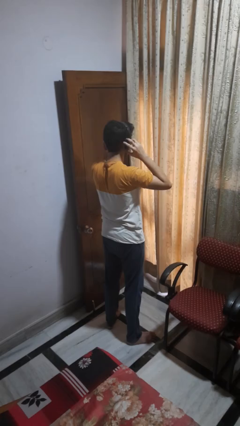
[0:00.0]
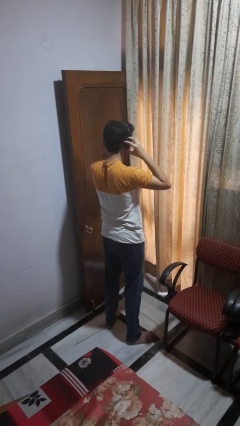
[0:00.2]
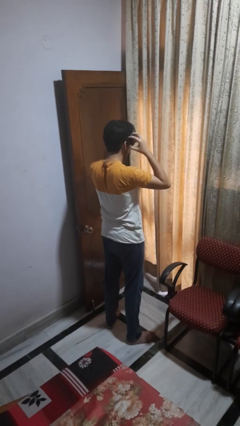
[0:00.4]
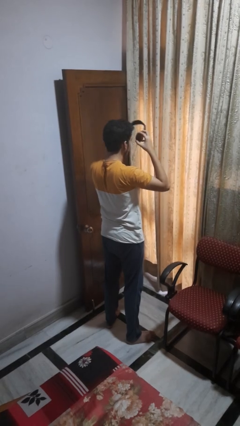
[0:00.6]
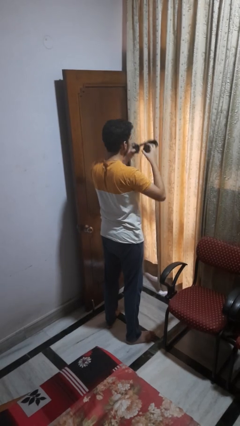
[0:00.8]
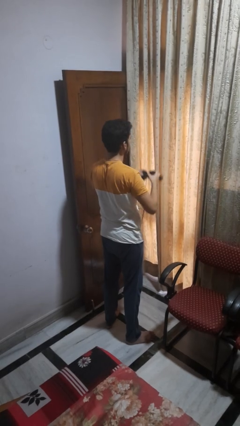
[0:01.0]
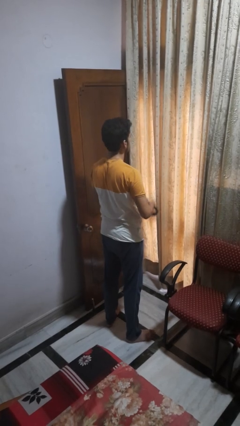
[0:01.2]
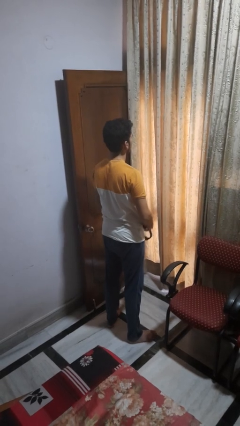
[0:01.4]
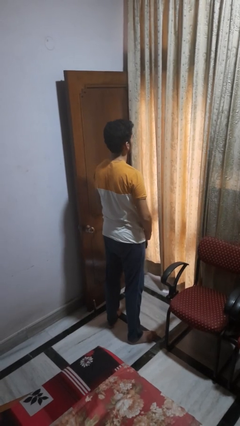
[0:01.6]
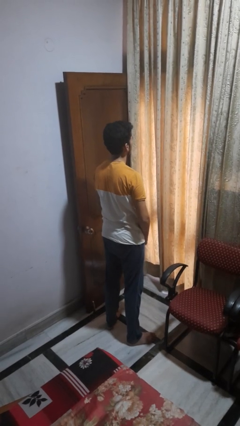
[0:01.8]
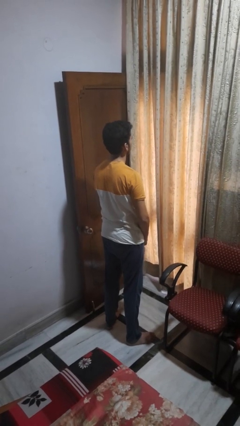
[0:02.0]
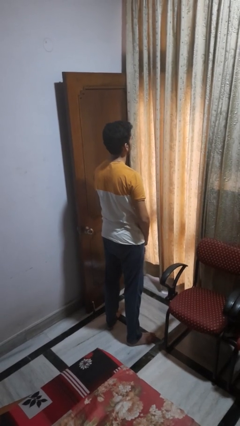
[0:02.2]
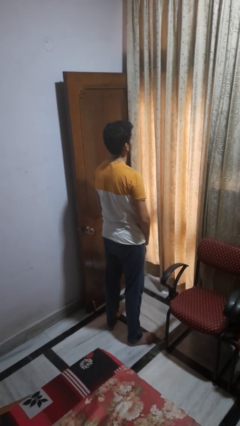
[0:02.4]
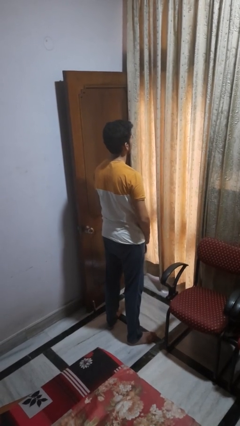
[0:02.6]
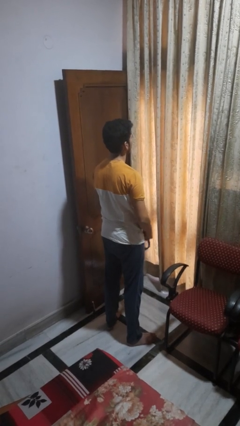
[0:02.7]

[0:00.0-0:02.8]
person takes off headphones

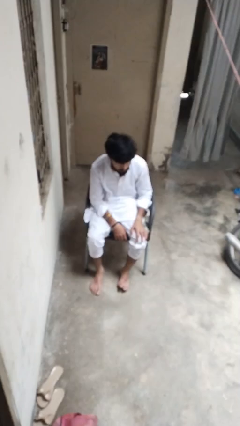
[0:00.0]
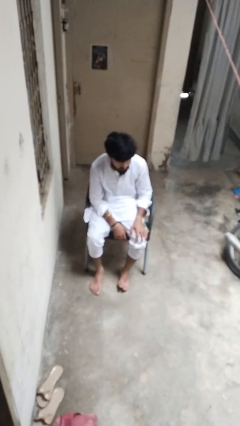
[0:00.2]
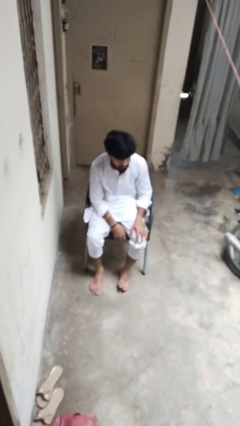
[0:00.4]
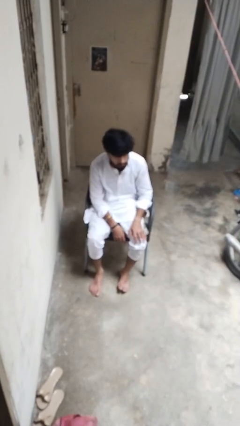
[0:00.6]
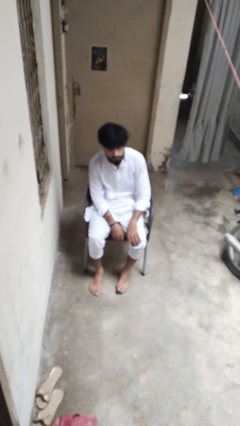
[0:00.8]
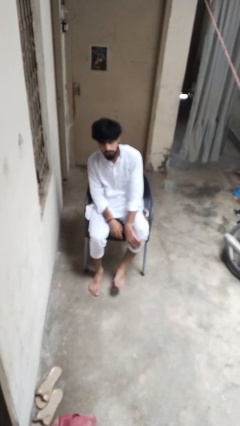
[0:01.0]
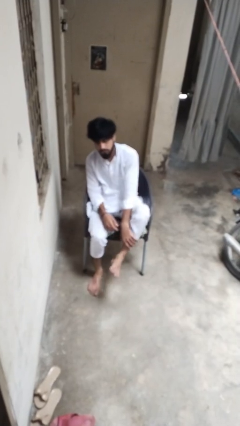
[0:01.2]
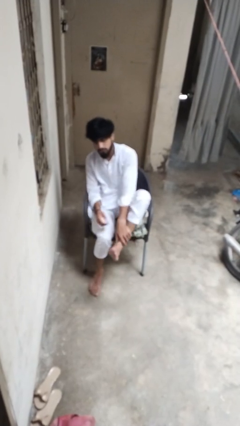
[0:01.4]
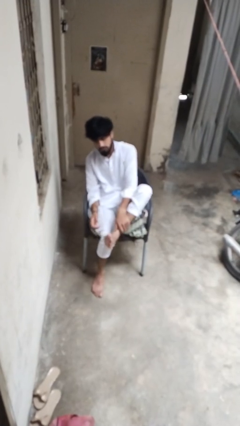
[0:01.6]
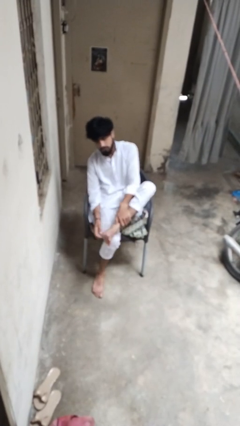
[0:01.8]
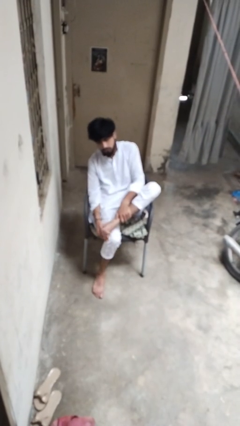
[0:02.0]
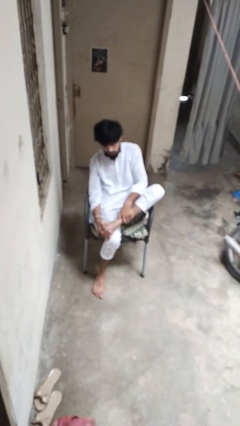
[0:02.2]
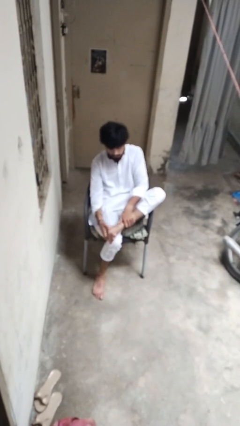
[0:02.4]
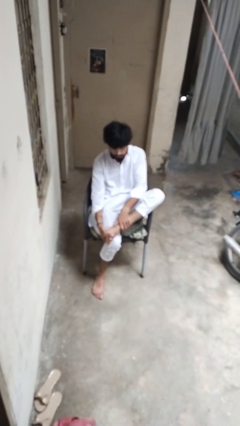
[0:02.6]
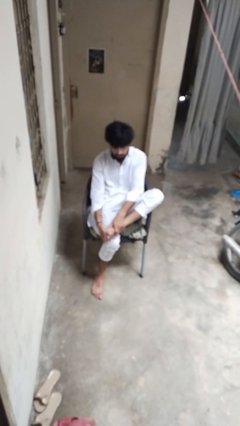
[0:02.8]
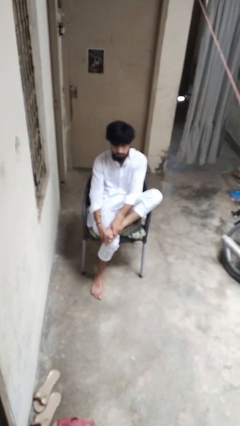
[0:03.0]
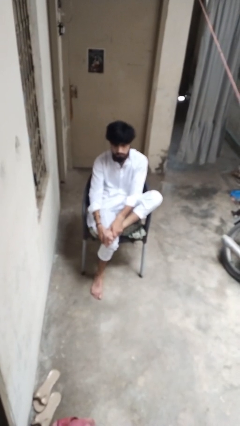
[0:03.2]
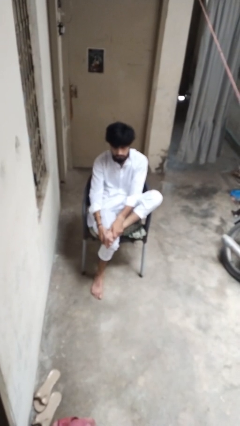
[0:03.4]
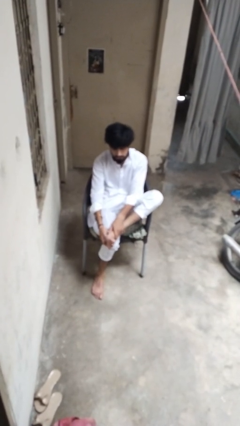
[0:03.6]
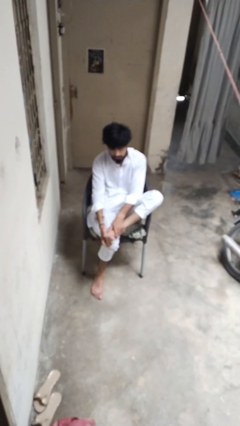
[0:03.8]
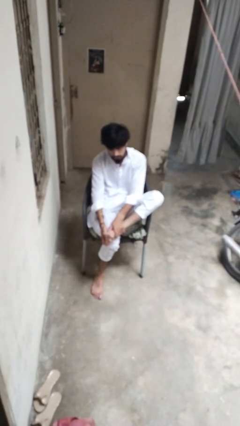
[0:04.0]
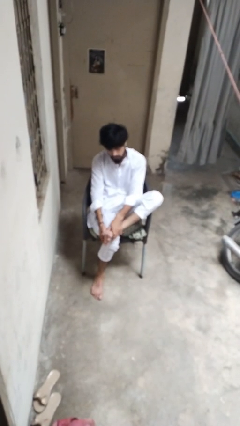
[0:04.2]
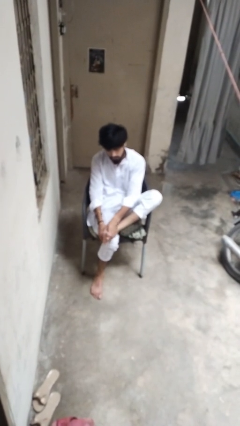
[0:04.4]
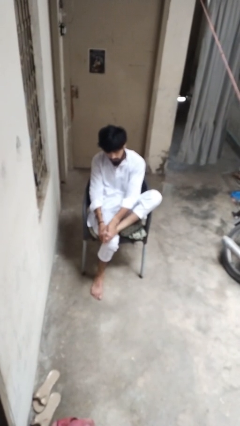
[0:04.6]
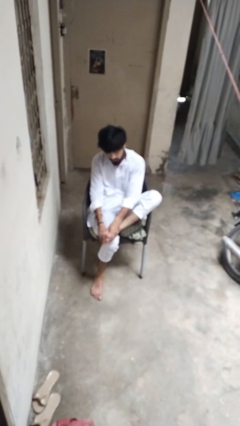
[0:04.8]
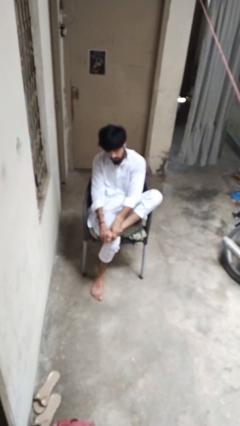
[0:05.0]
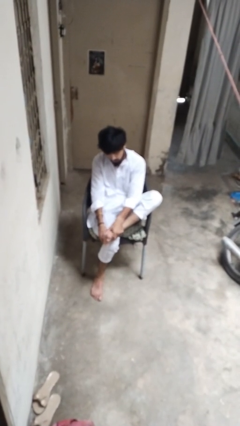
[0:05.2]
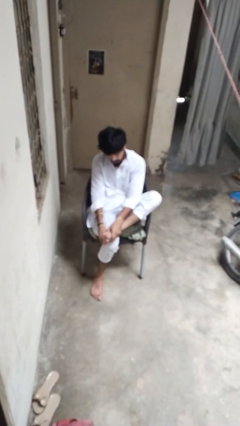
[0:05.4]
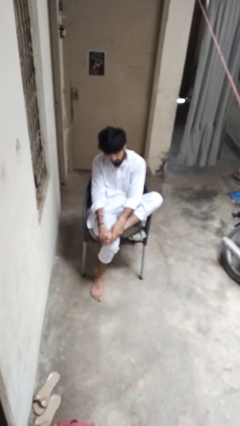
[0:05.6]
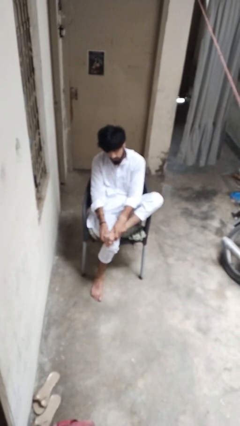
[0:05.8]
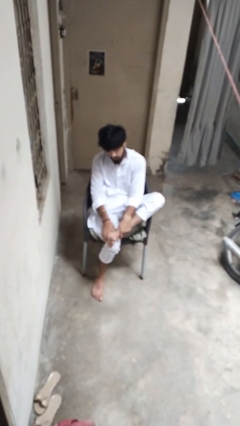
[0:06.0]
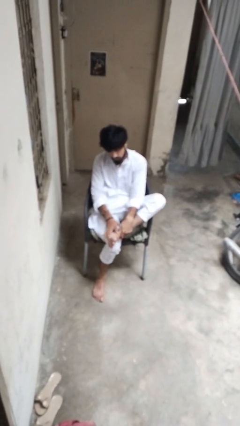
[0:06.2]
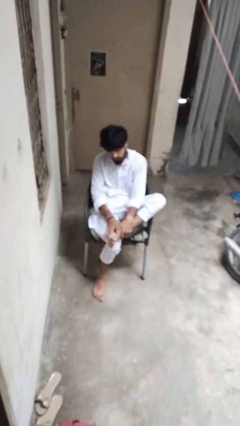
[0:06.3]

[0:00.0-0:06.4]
person rubs foot

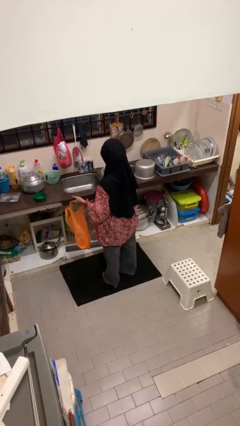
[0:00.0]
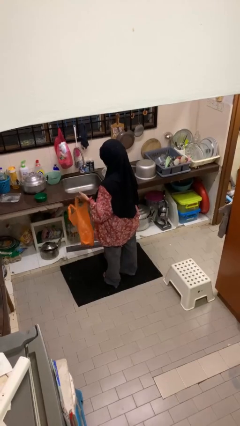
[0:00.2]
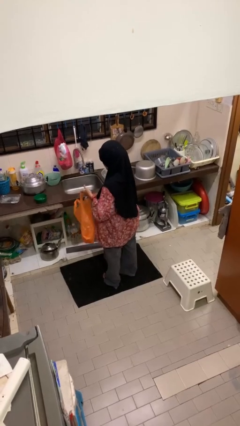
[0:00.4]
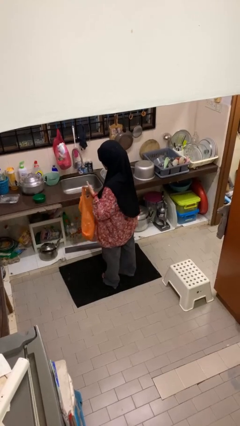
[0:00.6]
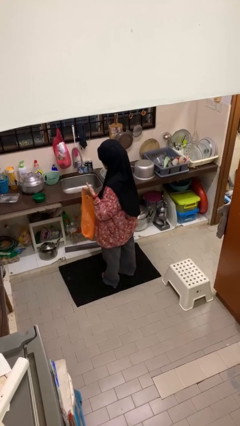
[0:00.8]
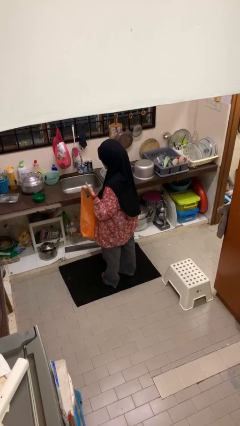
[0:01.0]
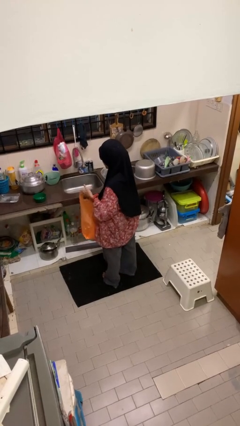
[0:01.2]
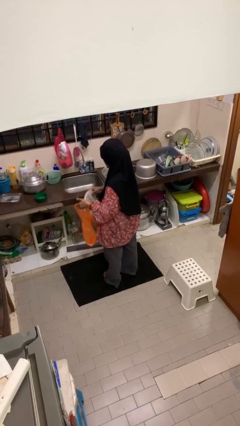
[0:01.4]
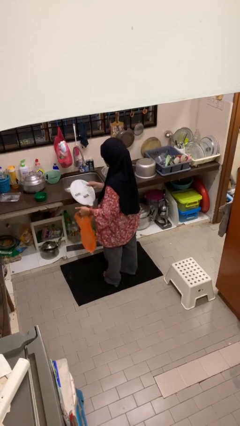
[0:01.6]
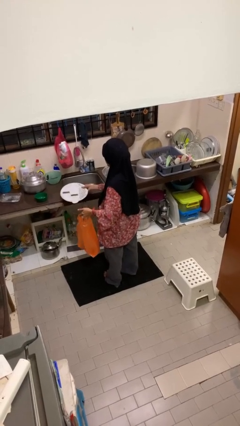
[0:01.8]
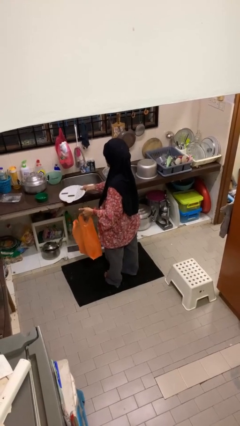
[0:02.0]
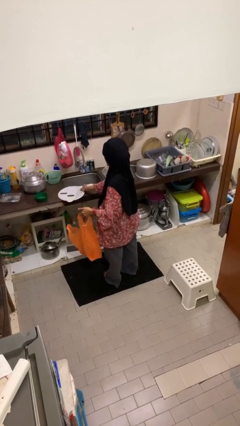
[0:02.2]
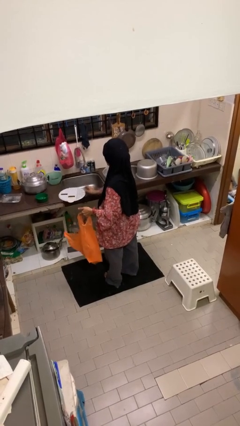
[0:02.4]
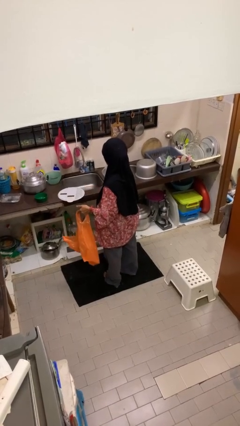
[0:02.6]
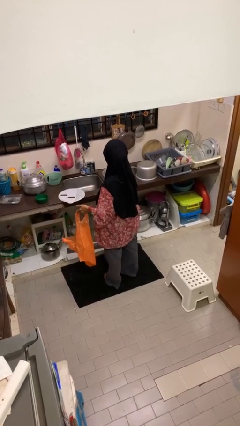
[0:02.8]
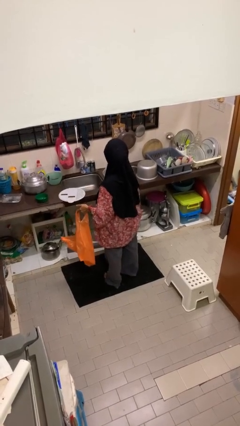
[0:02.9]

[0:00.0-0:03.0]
person takes object from bag

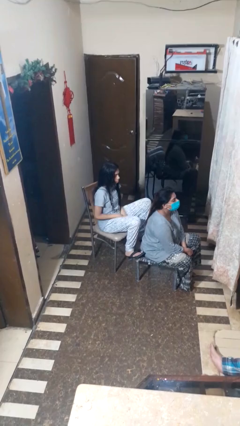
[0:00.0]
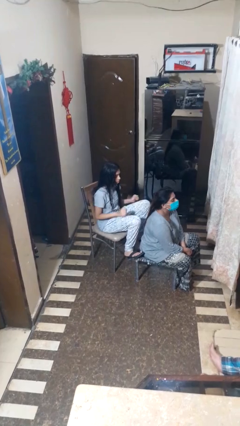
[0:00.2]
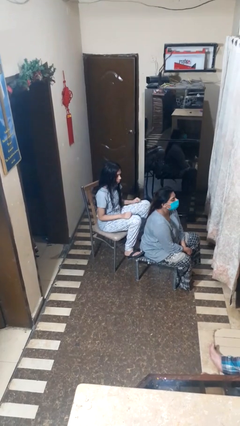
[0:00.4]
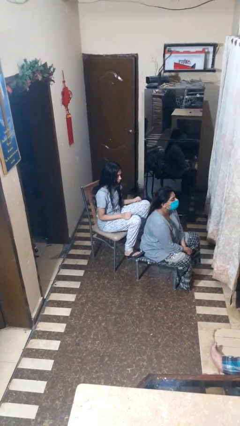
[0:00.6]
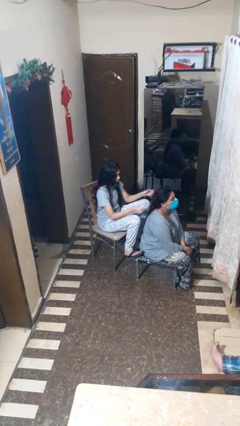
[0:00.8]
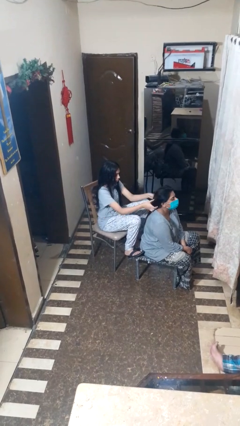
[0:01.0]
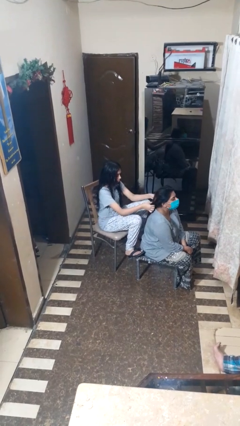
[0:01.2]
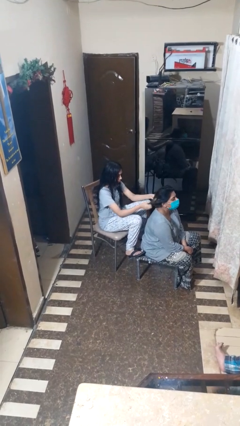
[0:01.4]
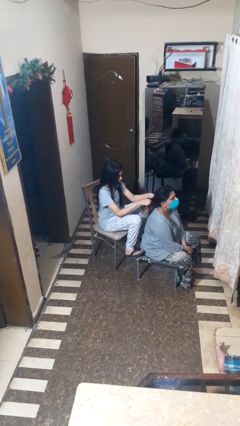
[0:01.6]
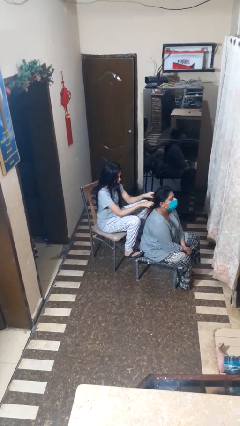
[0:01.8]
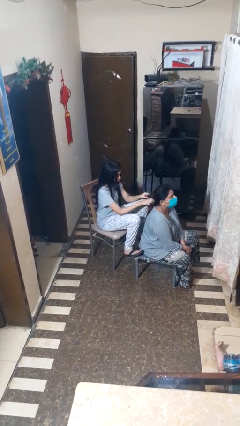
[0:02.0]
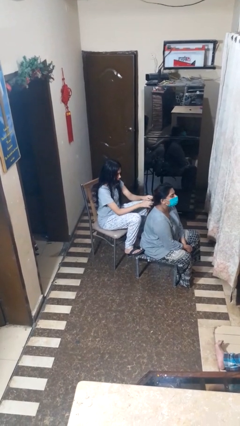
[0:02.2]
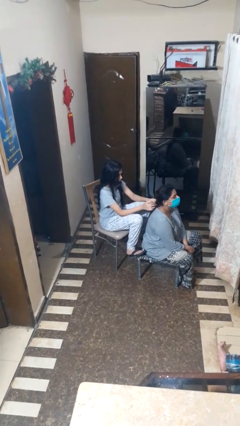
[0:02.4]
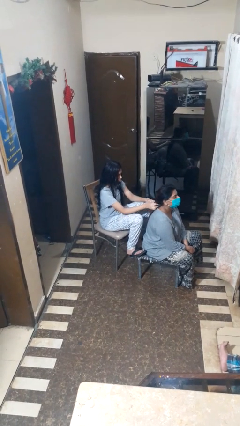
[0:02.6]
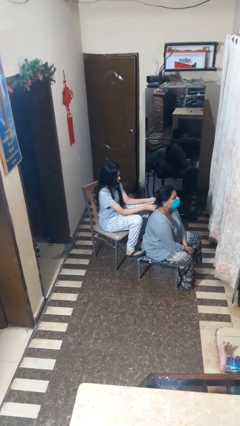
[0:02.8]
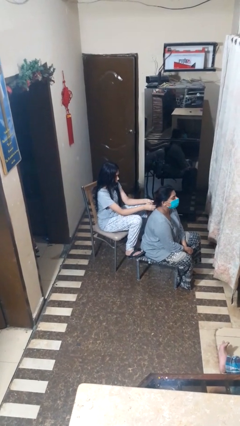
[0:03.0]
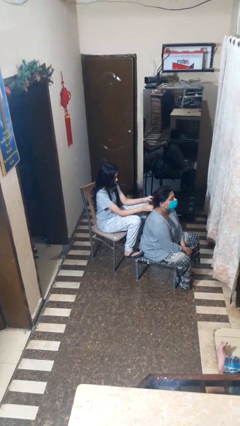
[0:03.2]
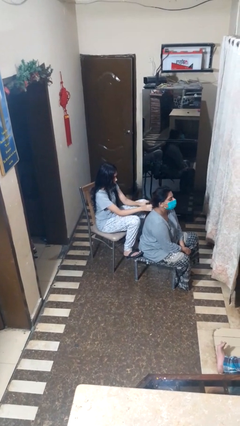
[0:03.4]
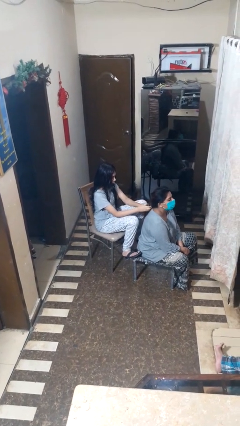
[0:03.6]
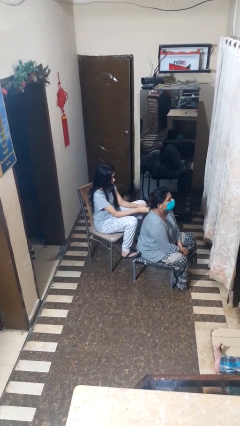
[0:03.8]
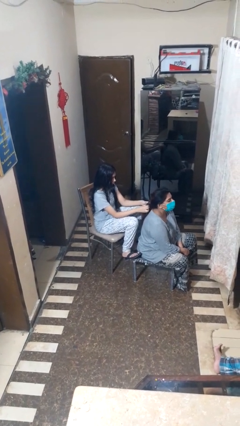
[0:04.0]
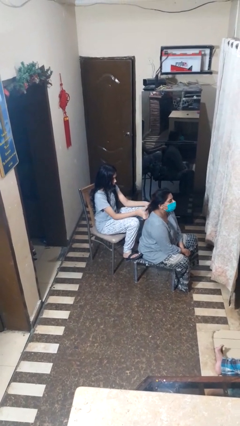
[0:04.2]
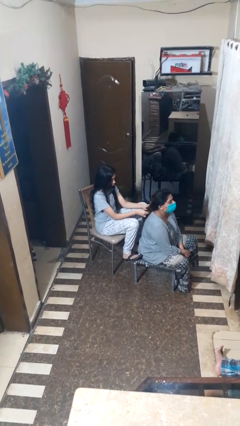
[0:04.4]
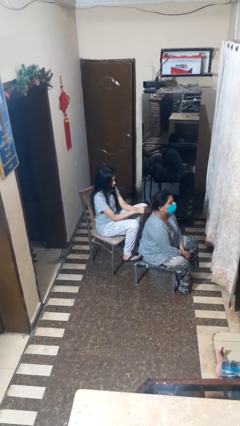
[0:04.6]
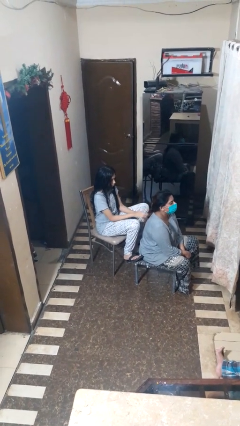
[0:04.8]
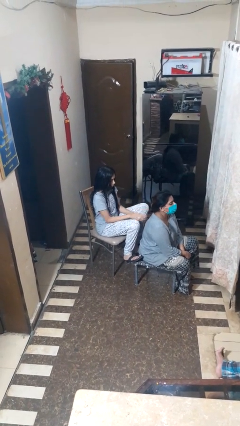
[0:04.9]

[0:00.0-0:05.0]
person braids hair of person

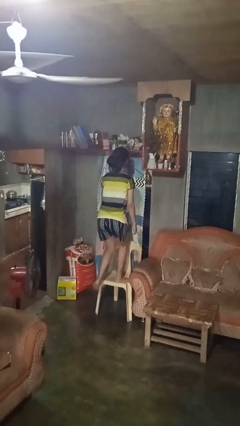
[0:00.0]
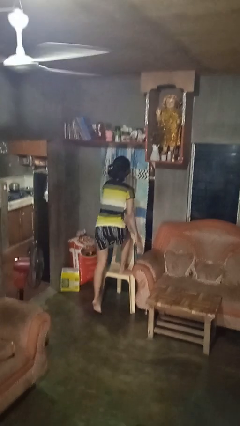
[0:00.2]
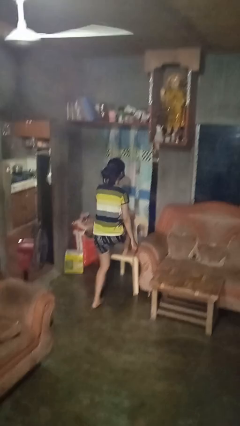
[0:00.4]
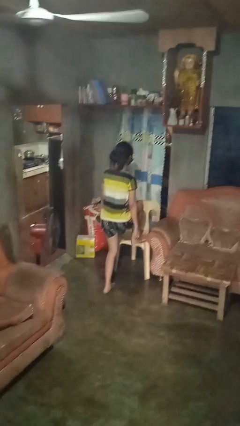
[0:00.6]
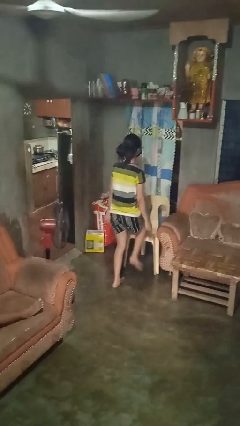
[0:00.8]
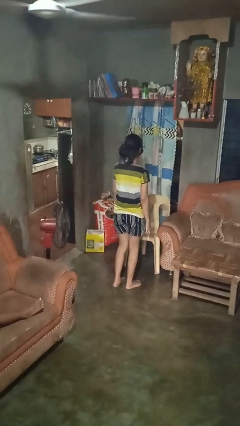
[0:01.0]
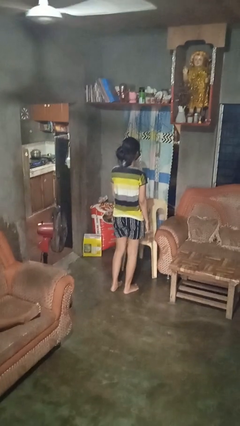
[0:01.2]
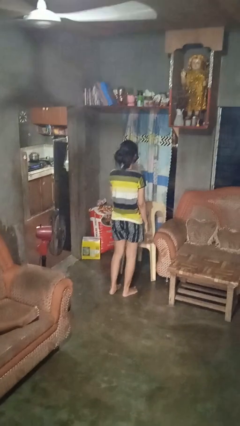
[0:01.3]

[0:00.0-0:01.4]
person climbs off chair
